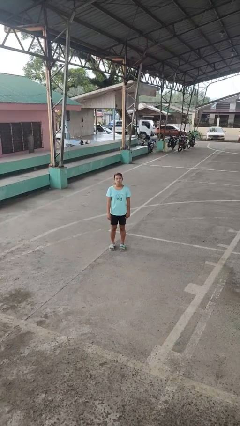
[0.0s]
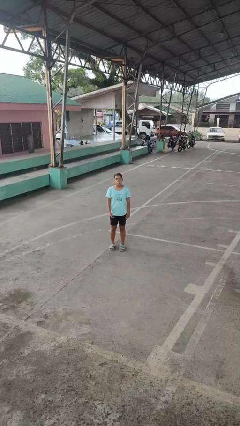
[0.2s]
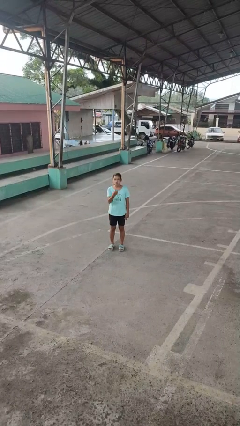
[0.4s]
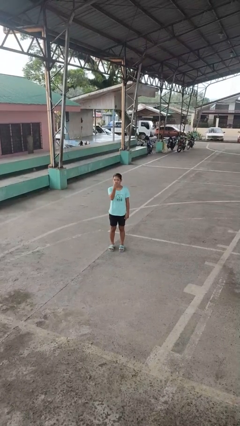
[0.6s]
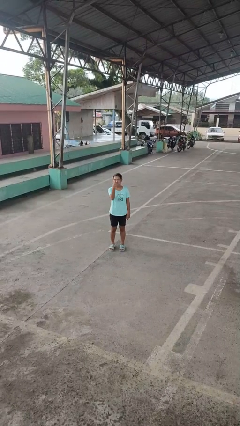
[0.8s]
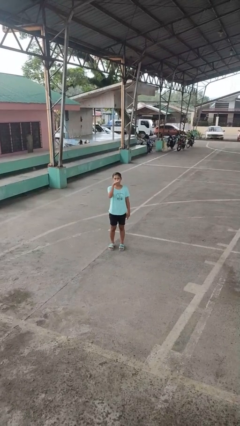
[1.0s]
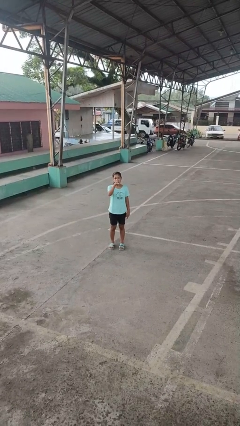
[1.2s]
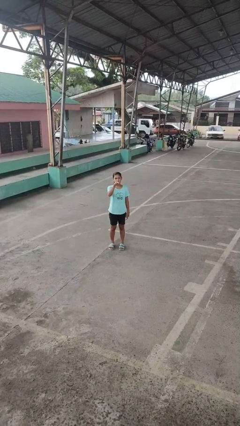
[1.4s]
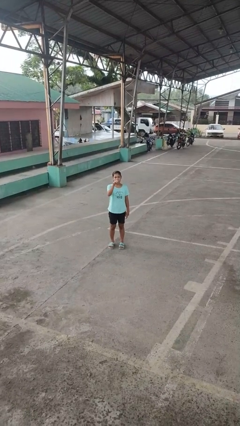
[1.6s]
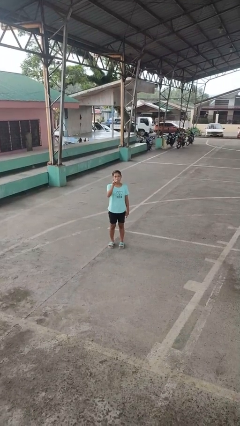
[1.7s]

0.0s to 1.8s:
person gestures watch closely

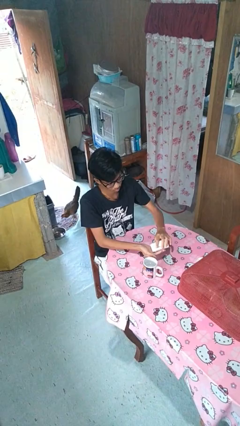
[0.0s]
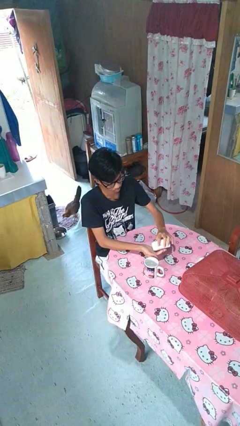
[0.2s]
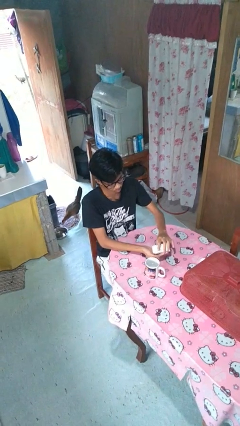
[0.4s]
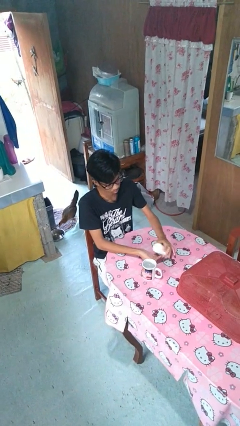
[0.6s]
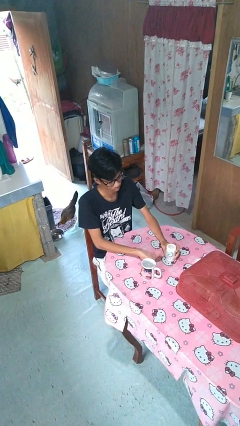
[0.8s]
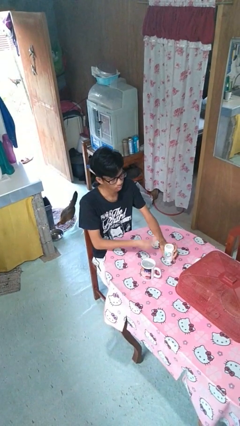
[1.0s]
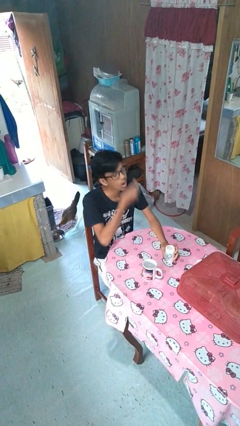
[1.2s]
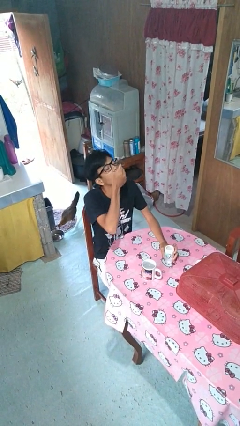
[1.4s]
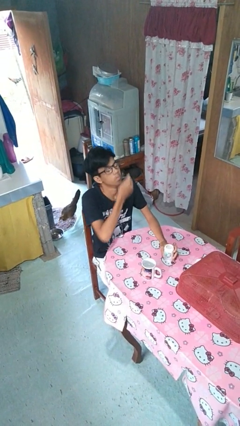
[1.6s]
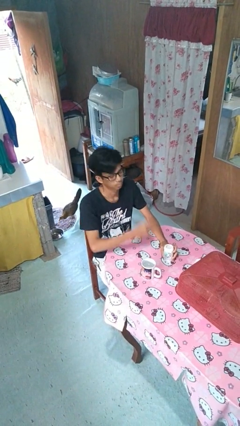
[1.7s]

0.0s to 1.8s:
person takes medicine pills

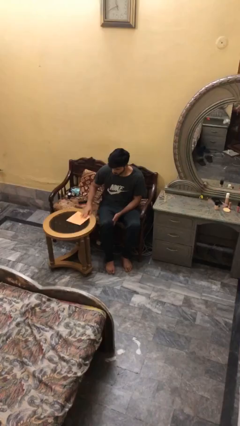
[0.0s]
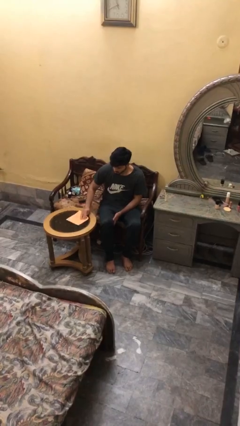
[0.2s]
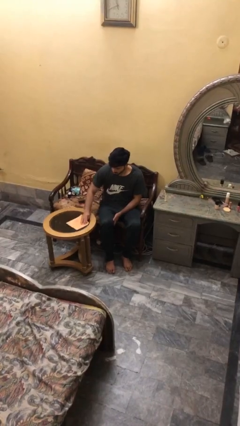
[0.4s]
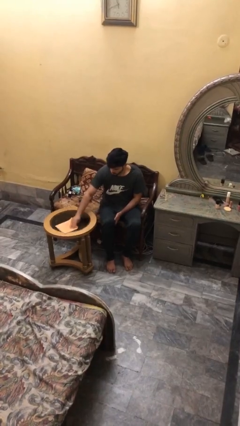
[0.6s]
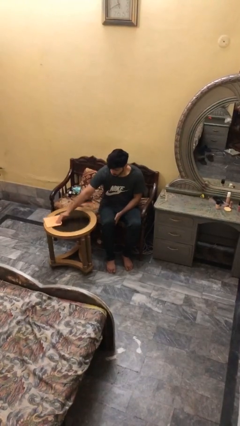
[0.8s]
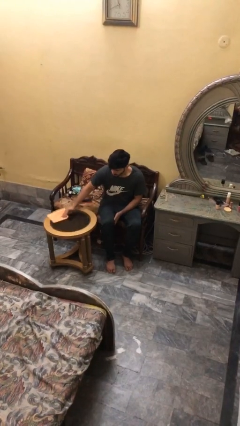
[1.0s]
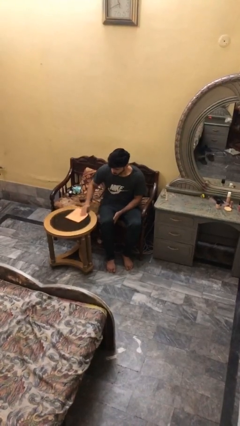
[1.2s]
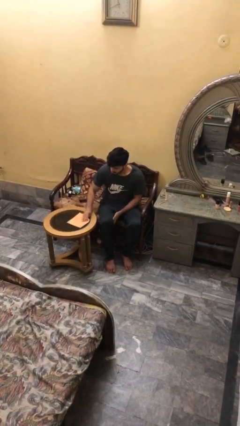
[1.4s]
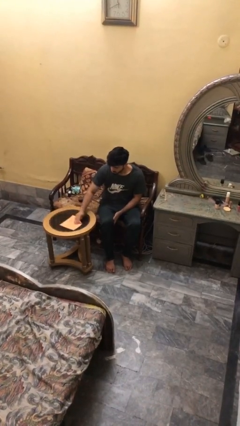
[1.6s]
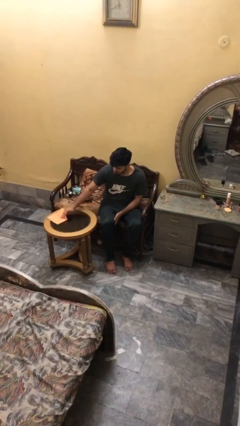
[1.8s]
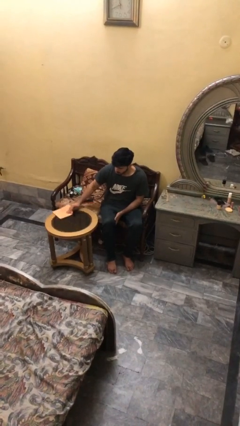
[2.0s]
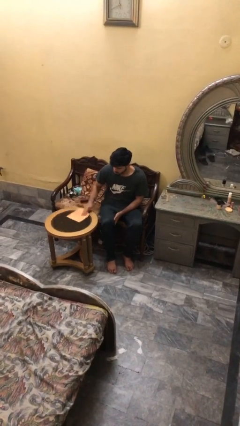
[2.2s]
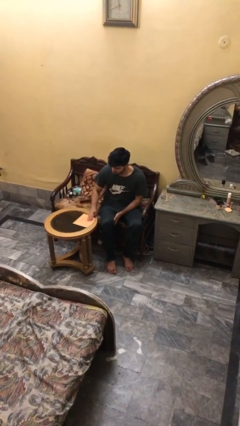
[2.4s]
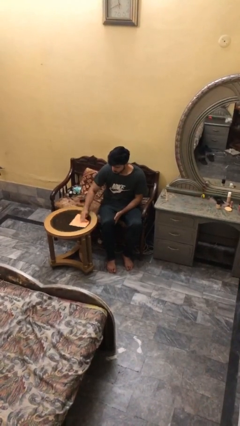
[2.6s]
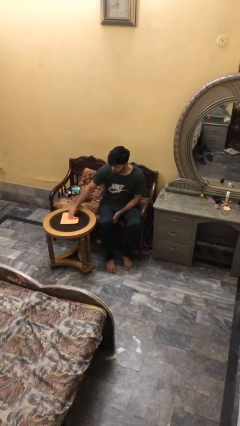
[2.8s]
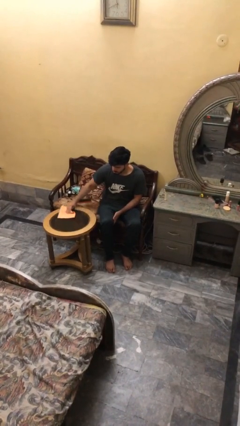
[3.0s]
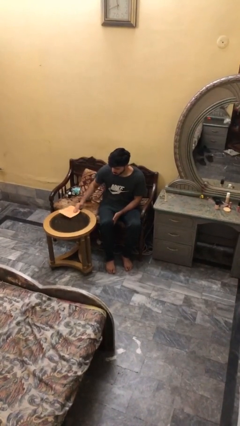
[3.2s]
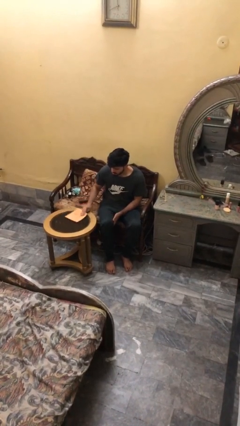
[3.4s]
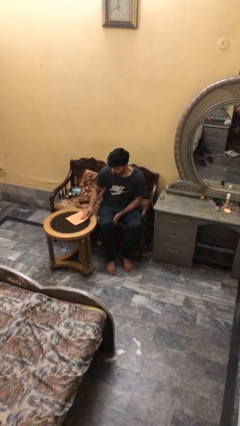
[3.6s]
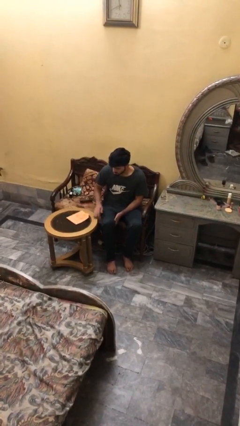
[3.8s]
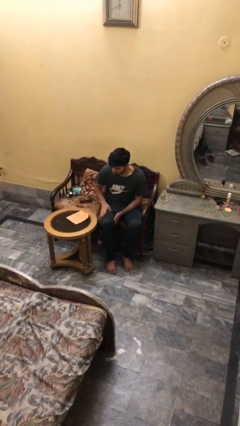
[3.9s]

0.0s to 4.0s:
person cleans table with rag

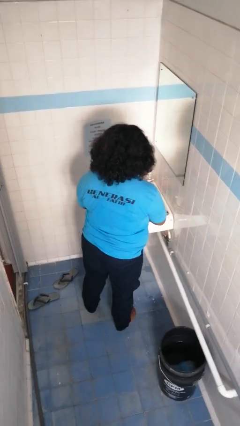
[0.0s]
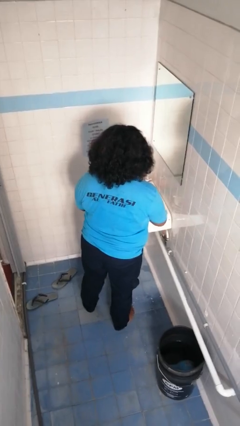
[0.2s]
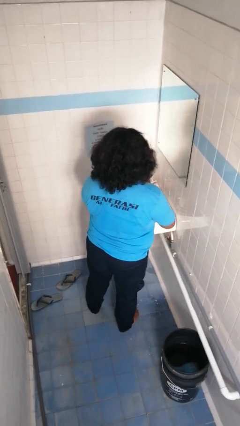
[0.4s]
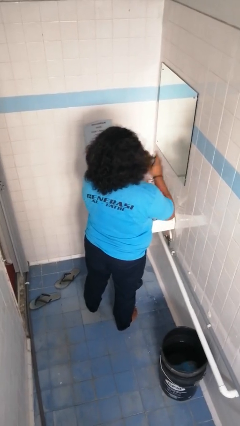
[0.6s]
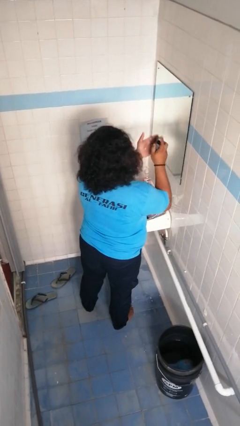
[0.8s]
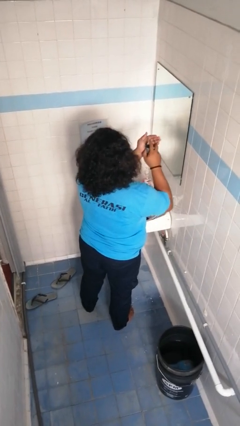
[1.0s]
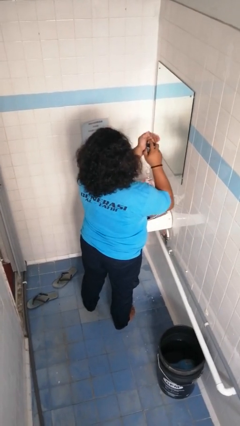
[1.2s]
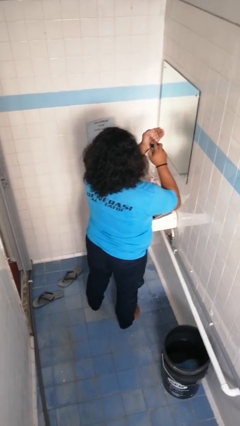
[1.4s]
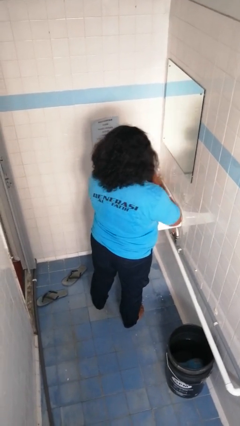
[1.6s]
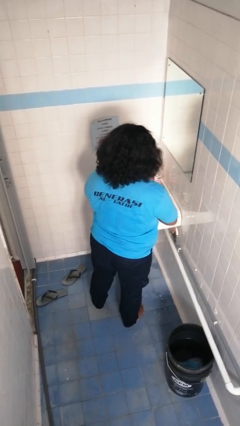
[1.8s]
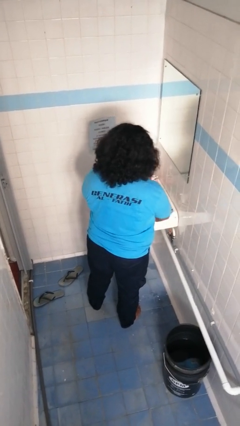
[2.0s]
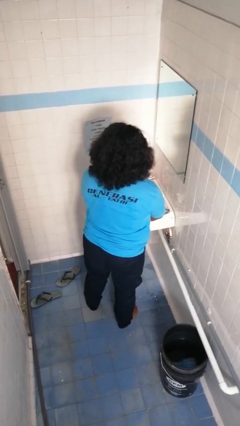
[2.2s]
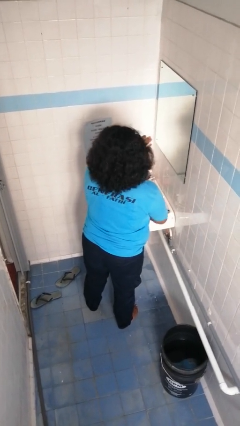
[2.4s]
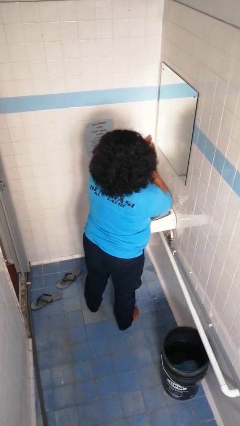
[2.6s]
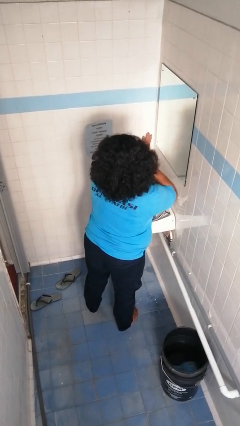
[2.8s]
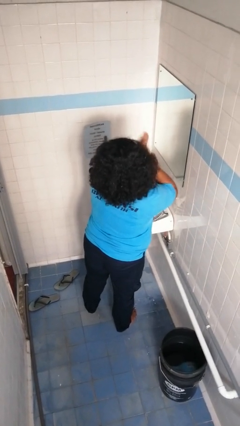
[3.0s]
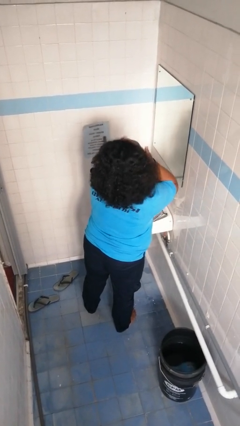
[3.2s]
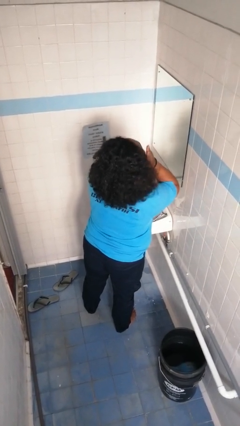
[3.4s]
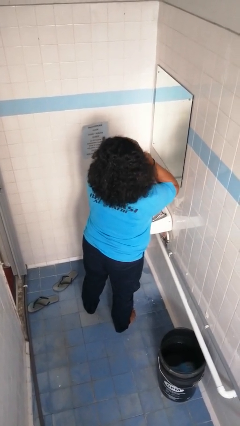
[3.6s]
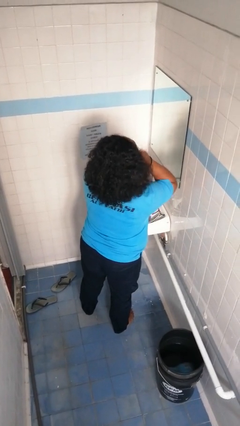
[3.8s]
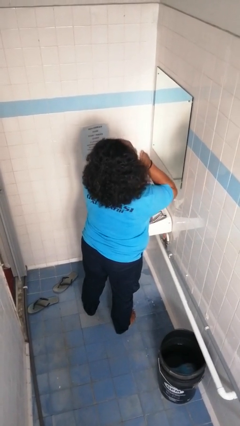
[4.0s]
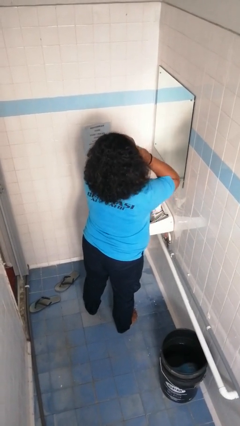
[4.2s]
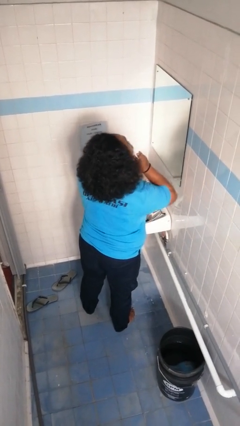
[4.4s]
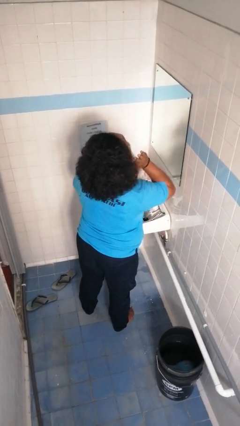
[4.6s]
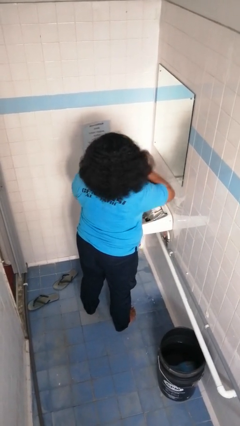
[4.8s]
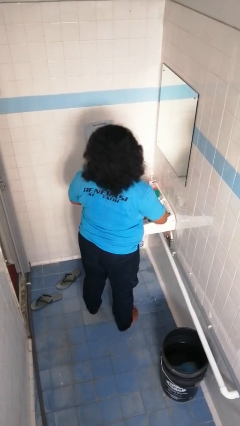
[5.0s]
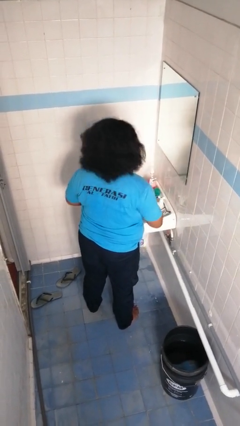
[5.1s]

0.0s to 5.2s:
person applies shaving cream

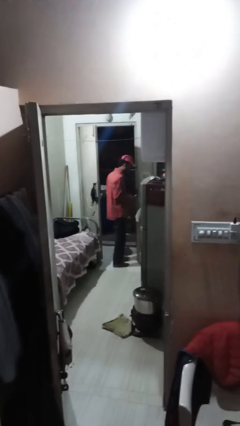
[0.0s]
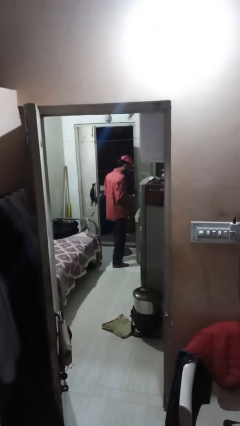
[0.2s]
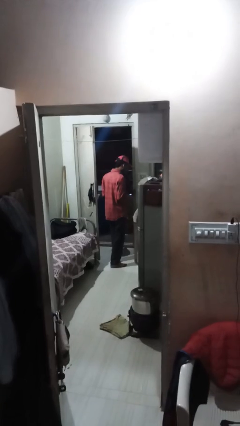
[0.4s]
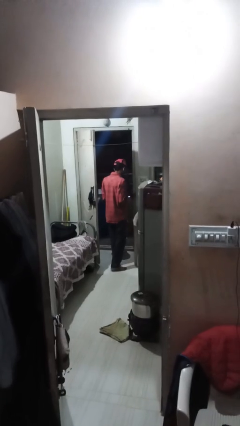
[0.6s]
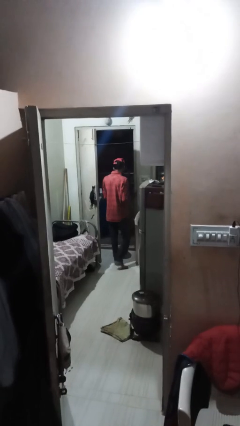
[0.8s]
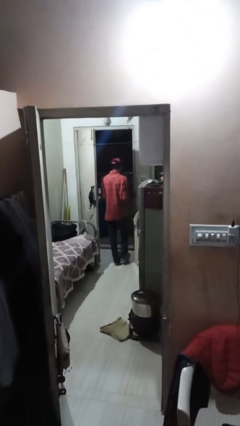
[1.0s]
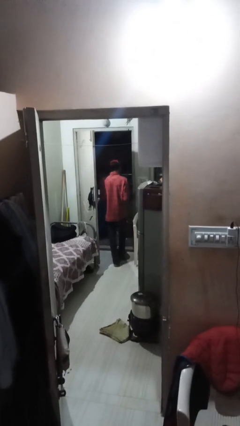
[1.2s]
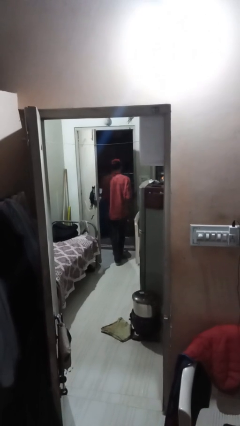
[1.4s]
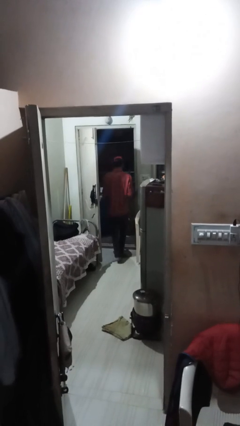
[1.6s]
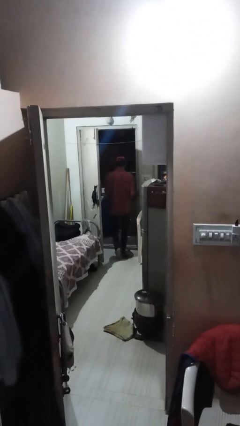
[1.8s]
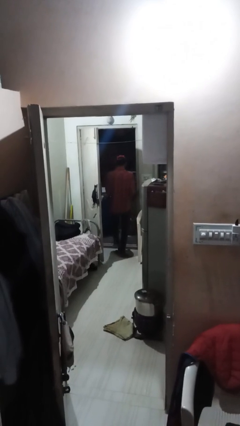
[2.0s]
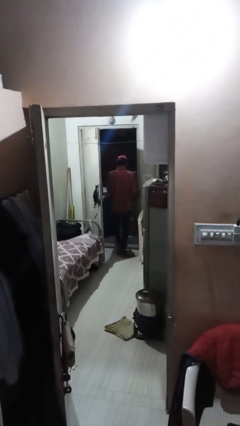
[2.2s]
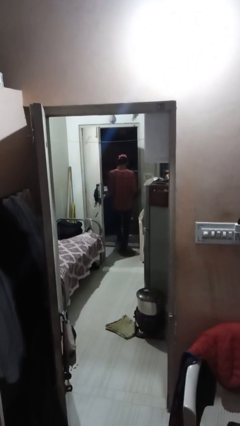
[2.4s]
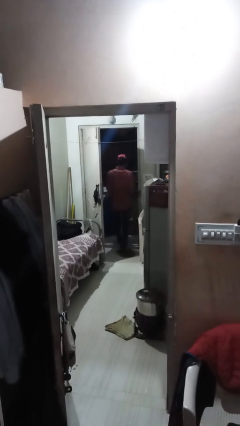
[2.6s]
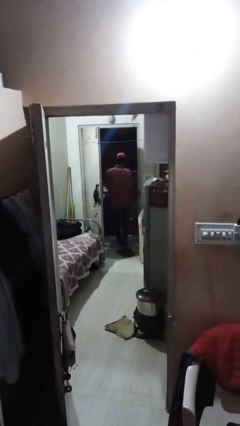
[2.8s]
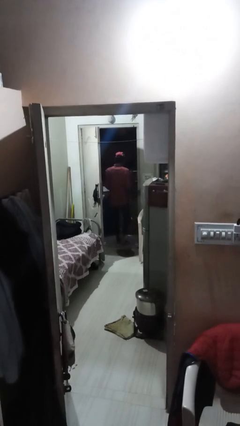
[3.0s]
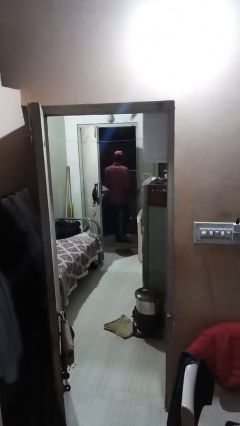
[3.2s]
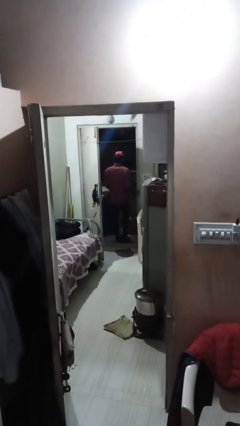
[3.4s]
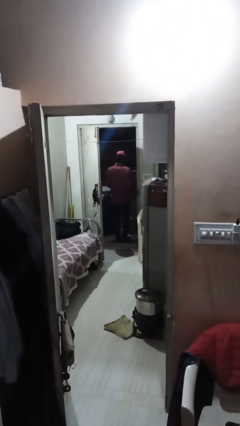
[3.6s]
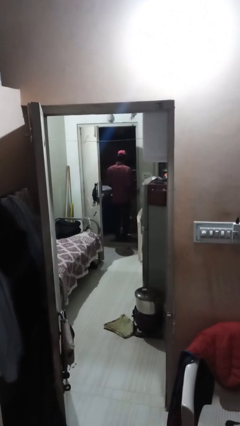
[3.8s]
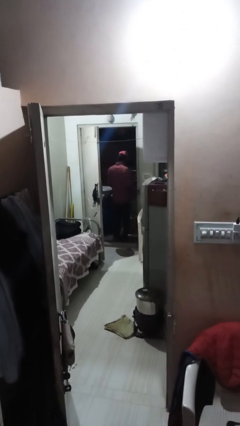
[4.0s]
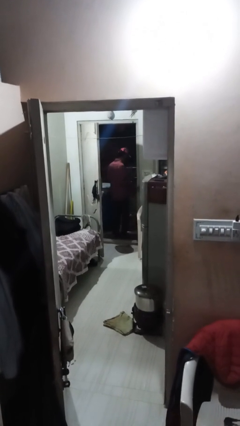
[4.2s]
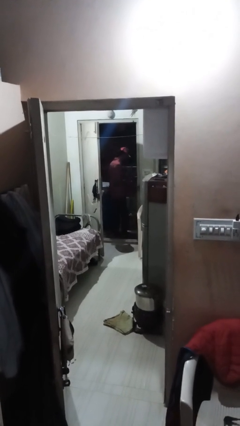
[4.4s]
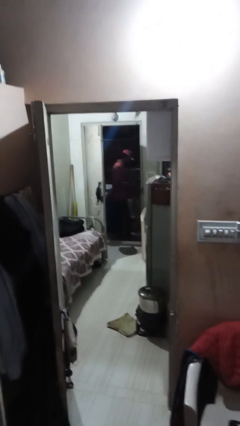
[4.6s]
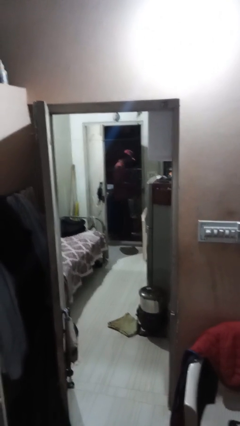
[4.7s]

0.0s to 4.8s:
person exits scene through structure

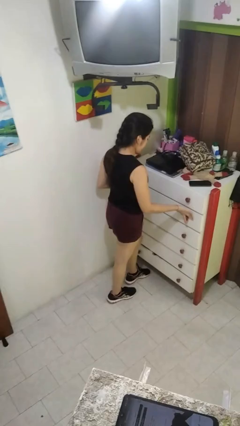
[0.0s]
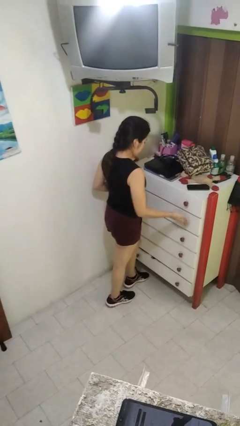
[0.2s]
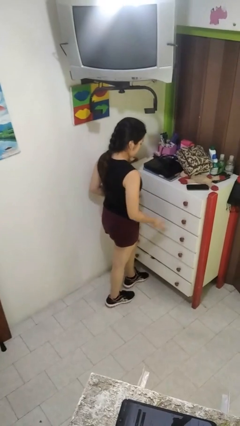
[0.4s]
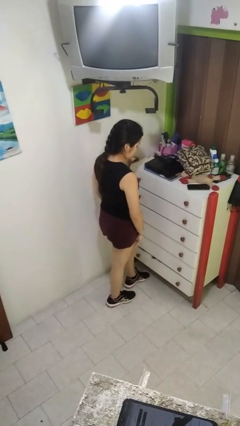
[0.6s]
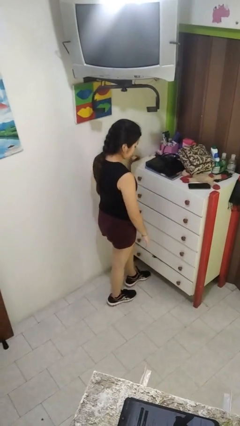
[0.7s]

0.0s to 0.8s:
person closes dresser drawer
